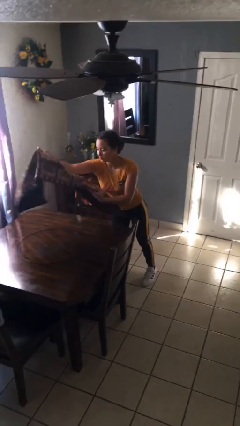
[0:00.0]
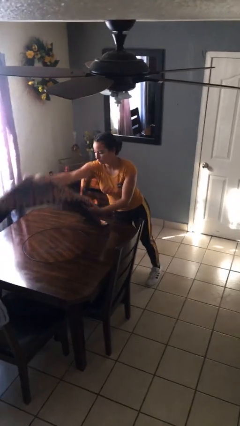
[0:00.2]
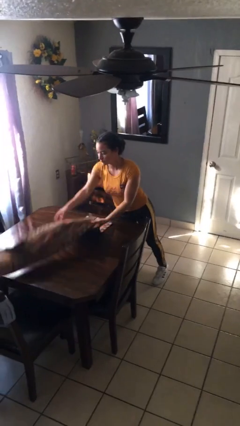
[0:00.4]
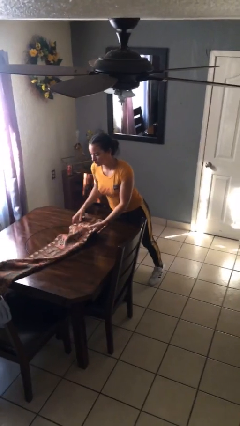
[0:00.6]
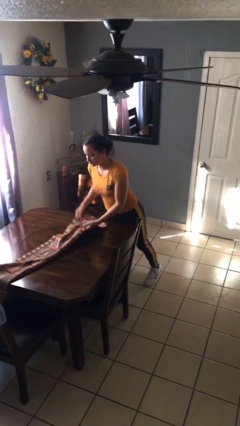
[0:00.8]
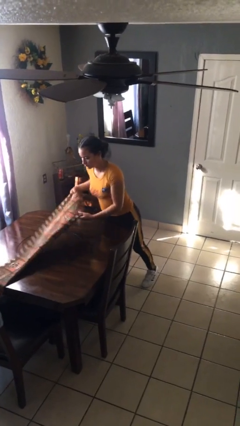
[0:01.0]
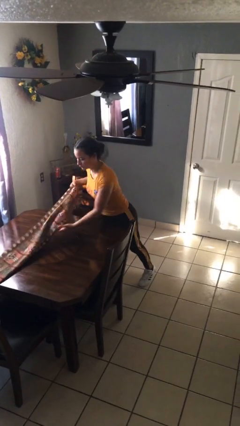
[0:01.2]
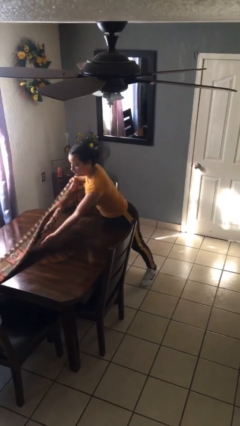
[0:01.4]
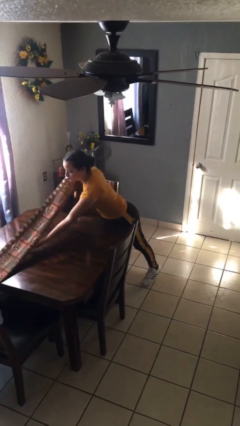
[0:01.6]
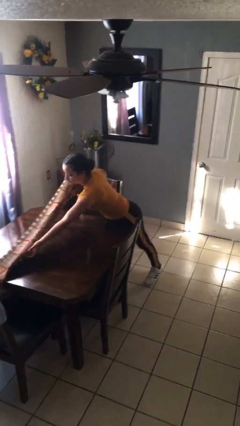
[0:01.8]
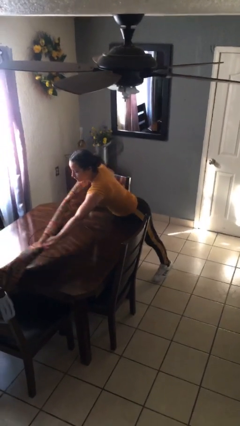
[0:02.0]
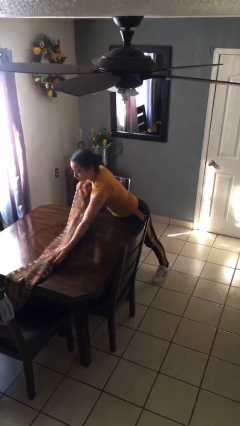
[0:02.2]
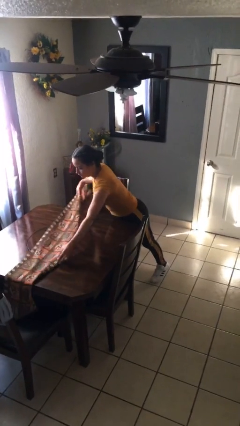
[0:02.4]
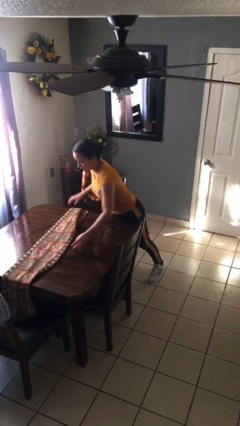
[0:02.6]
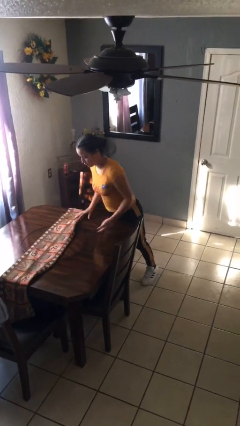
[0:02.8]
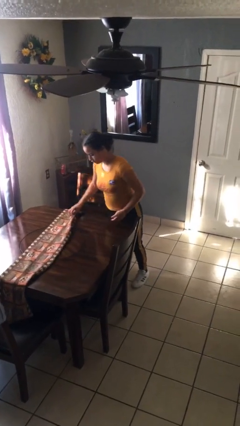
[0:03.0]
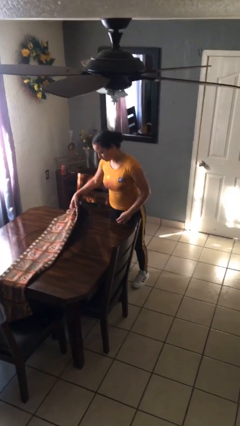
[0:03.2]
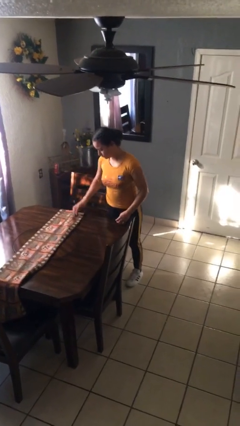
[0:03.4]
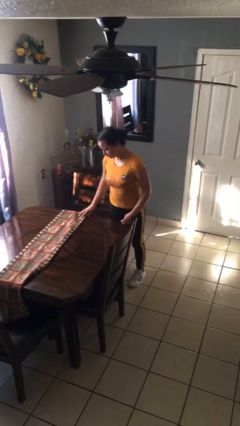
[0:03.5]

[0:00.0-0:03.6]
person spreads tablecloth

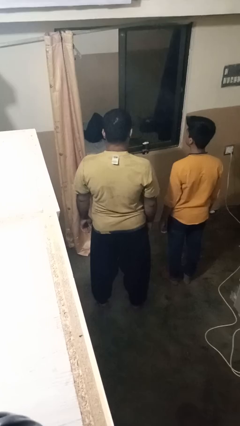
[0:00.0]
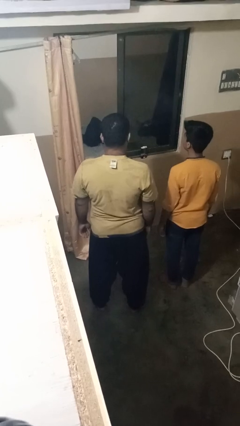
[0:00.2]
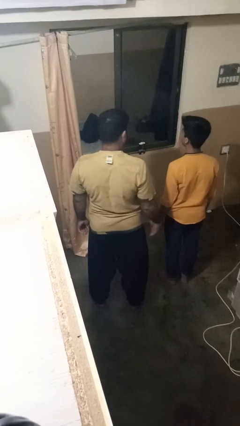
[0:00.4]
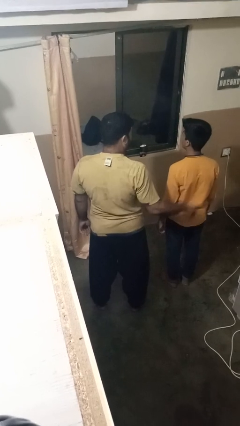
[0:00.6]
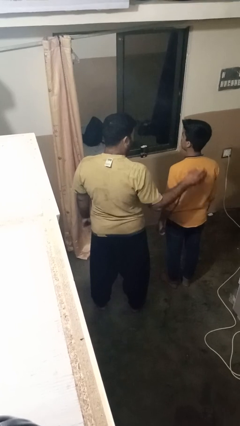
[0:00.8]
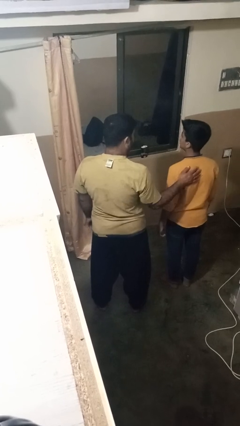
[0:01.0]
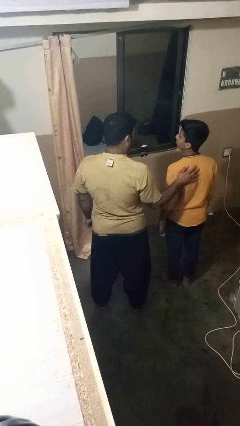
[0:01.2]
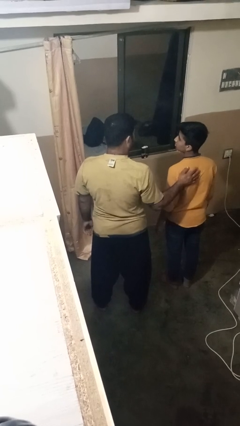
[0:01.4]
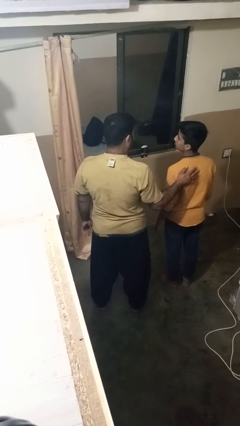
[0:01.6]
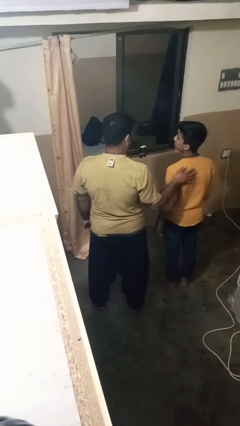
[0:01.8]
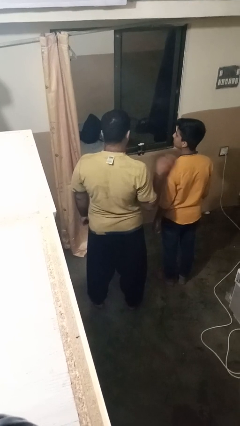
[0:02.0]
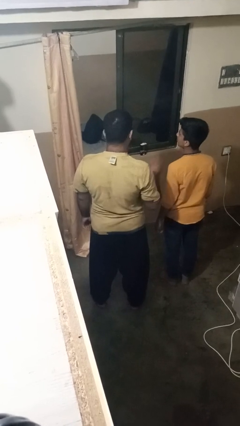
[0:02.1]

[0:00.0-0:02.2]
person touches back of person

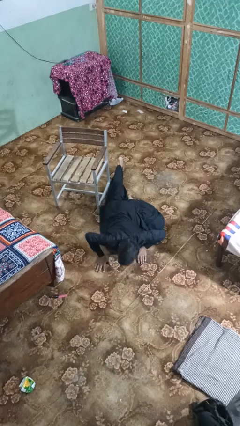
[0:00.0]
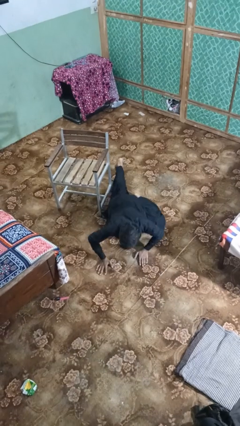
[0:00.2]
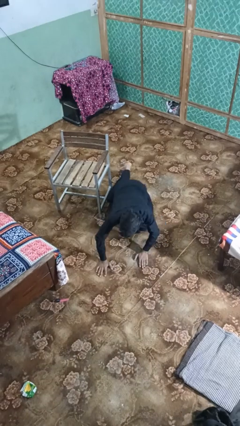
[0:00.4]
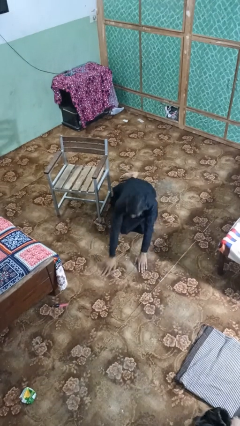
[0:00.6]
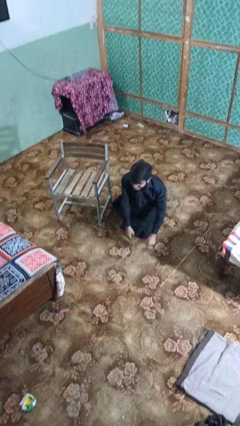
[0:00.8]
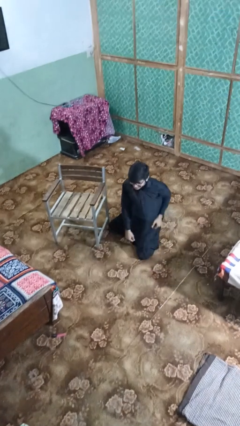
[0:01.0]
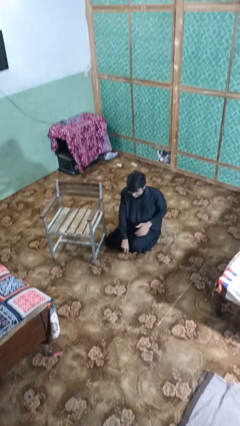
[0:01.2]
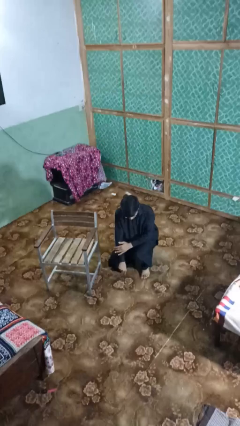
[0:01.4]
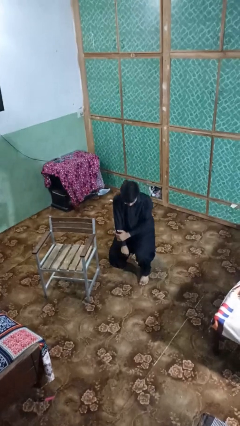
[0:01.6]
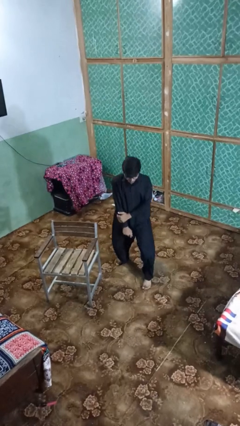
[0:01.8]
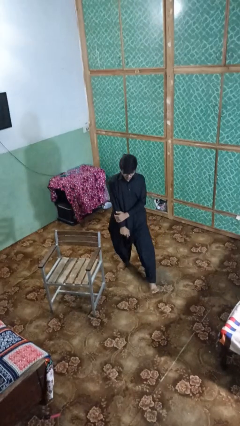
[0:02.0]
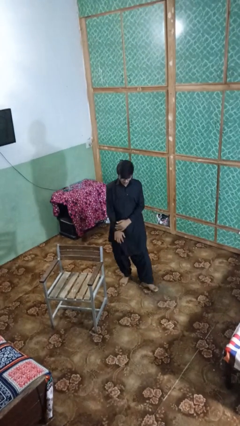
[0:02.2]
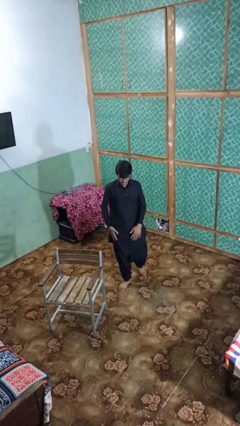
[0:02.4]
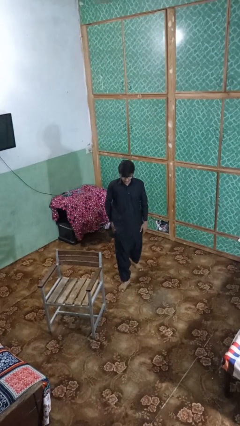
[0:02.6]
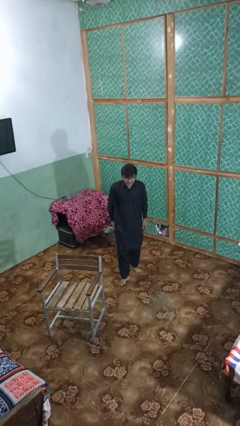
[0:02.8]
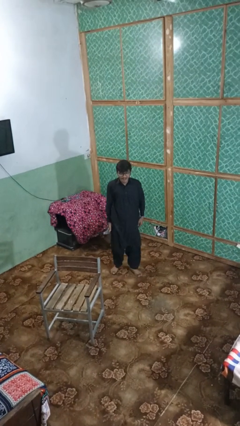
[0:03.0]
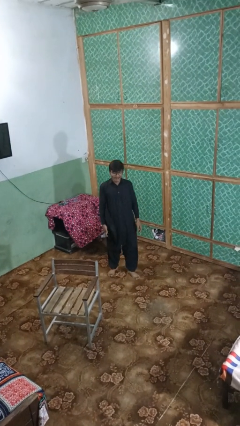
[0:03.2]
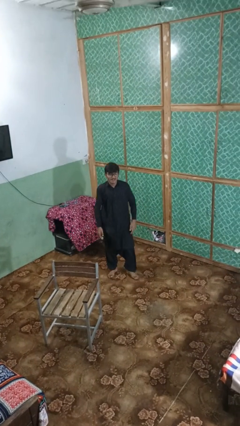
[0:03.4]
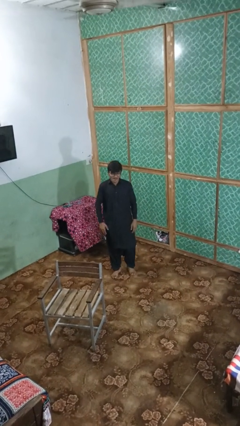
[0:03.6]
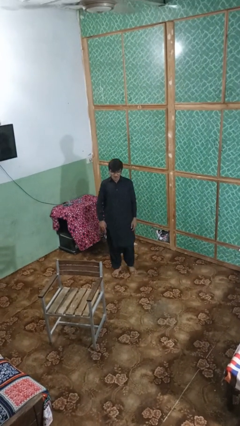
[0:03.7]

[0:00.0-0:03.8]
person stands up from floor

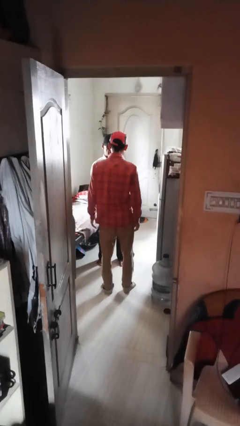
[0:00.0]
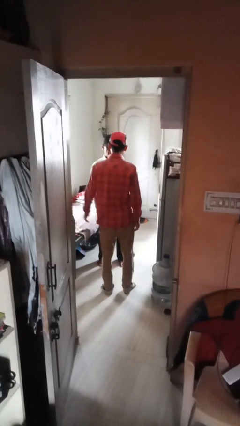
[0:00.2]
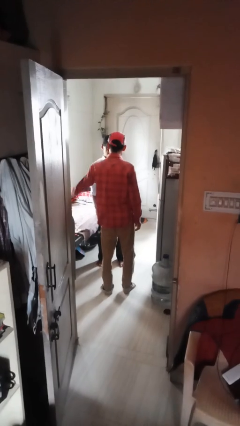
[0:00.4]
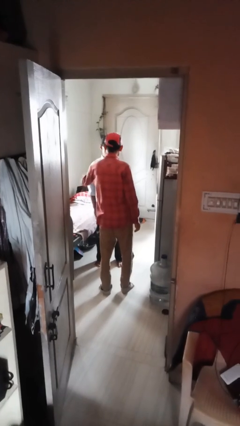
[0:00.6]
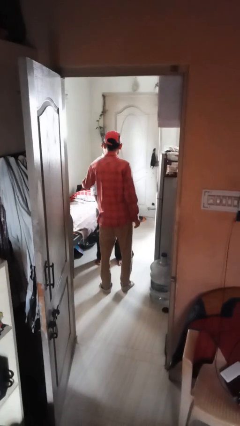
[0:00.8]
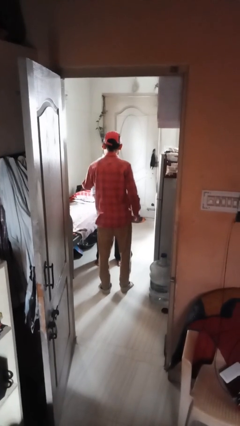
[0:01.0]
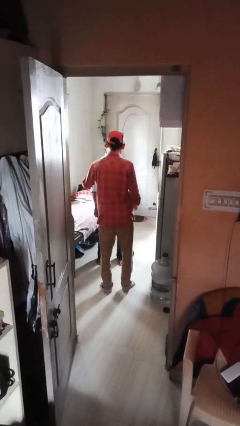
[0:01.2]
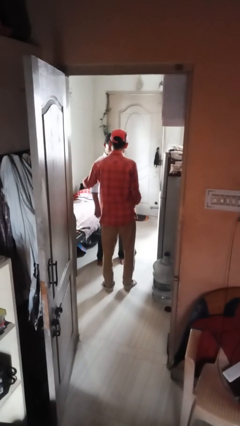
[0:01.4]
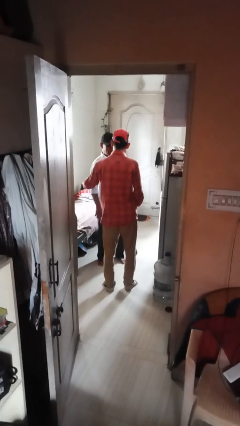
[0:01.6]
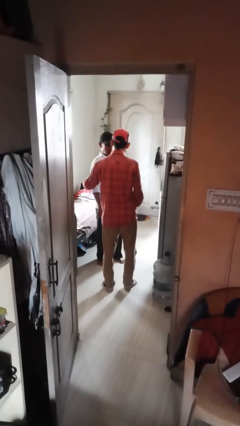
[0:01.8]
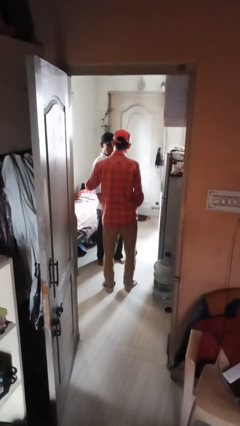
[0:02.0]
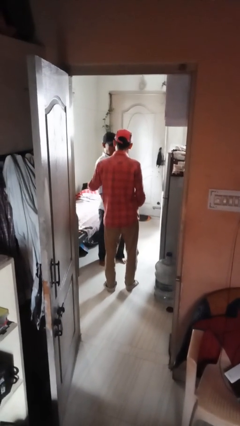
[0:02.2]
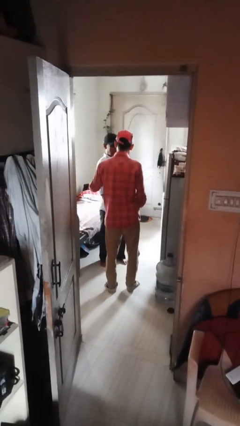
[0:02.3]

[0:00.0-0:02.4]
person grabs person by shoulder

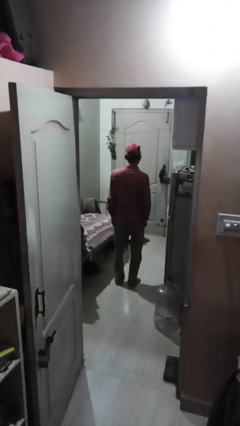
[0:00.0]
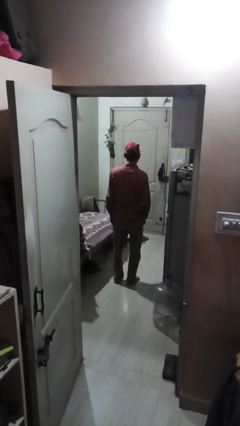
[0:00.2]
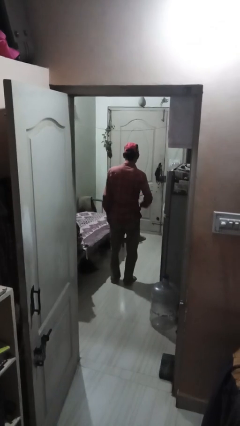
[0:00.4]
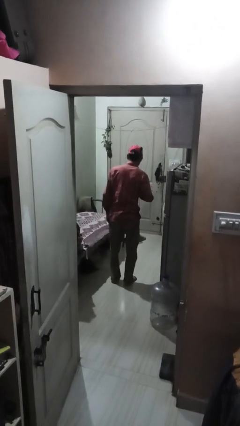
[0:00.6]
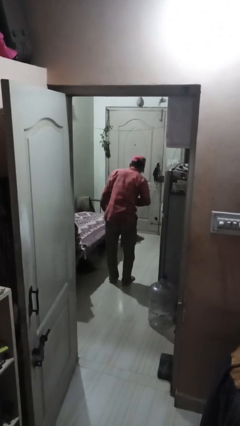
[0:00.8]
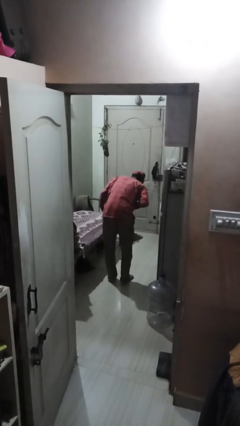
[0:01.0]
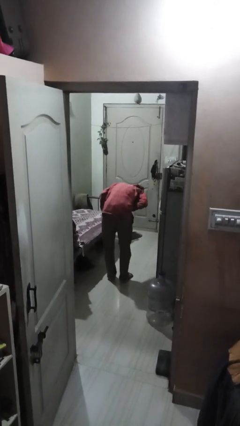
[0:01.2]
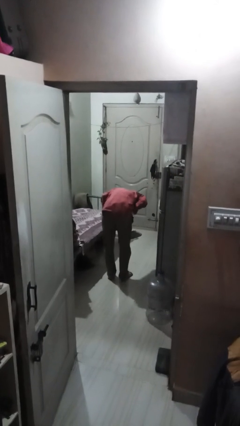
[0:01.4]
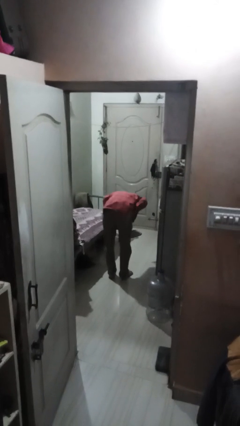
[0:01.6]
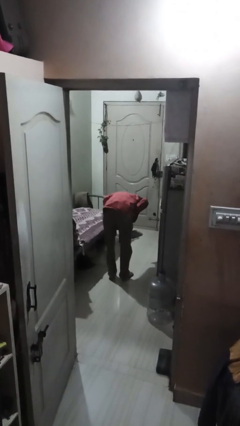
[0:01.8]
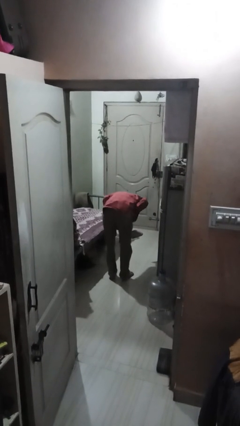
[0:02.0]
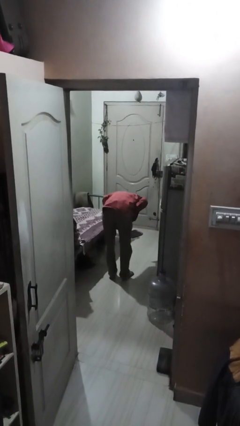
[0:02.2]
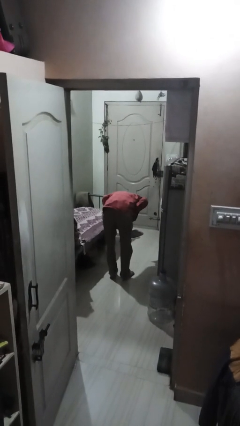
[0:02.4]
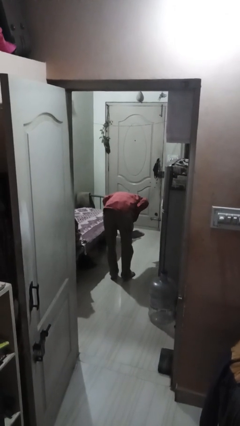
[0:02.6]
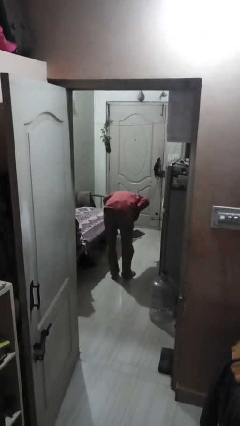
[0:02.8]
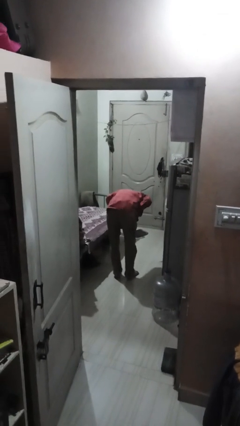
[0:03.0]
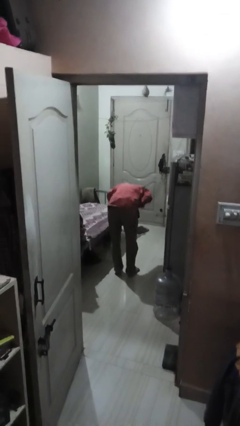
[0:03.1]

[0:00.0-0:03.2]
person bows

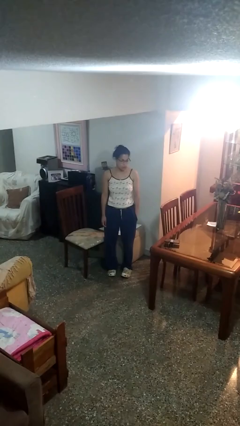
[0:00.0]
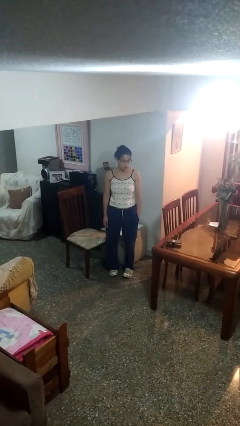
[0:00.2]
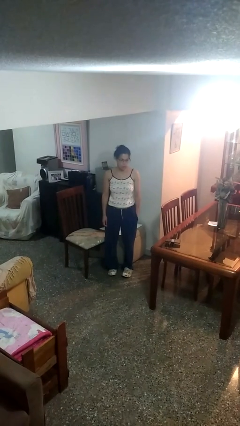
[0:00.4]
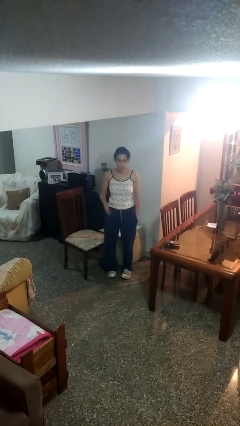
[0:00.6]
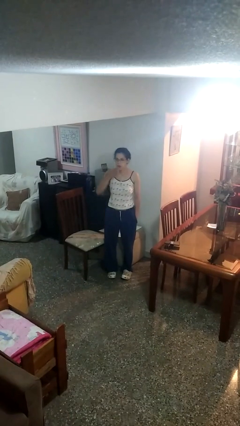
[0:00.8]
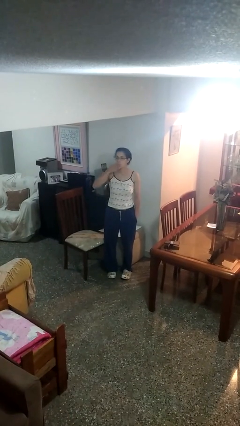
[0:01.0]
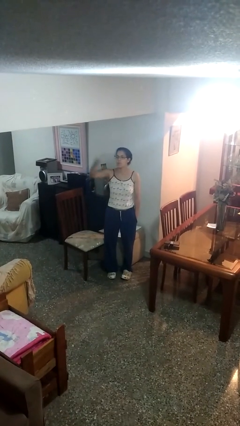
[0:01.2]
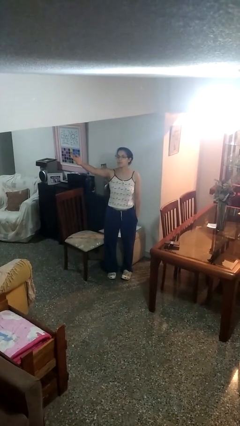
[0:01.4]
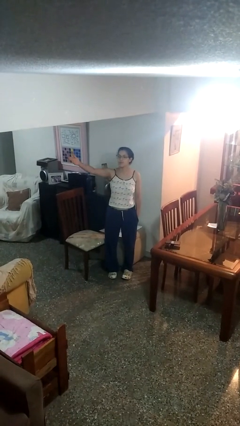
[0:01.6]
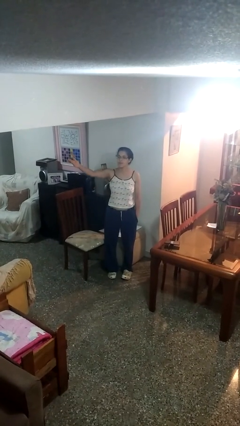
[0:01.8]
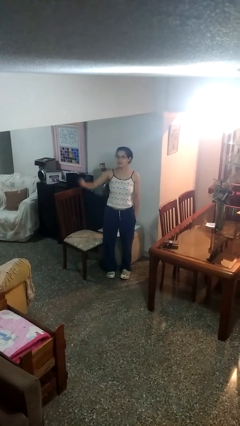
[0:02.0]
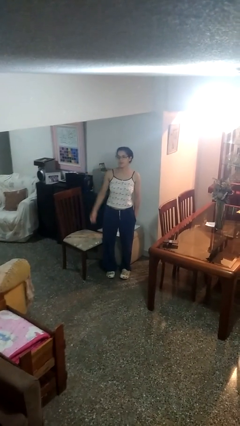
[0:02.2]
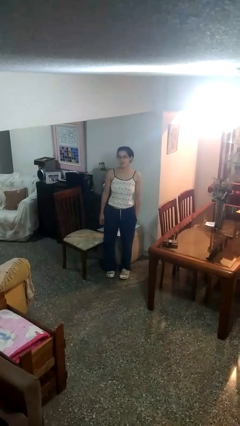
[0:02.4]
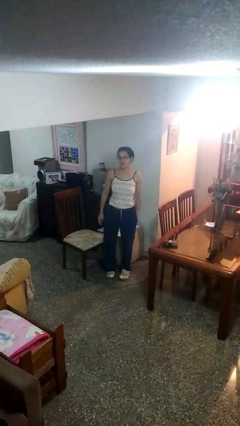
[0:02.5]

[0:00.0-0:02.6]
person gestures blow kiss
